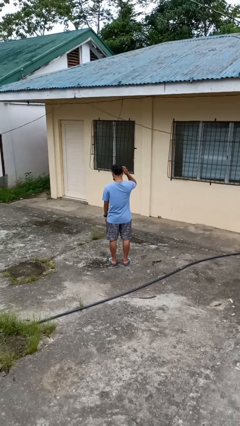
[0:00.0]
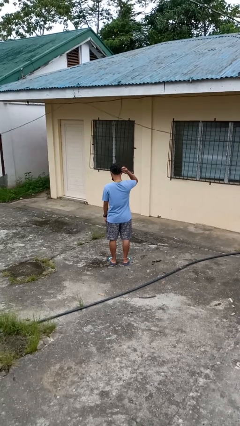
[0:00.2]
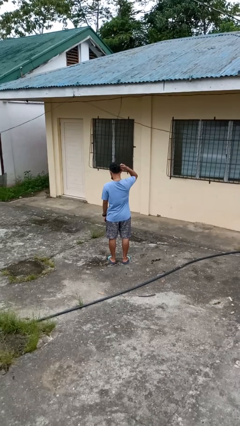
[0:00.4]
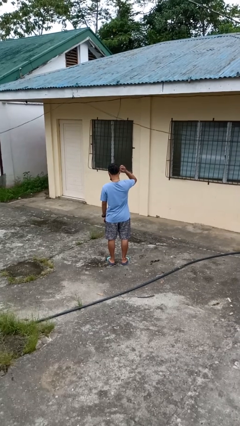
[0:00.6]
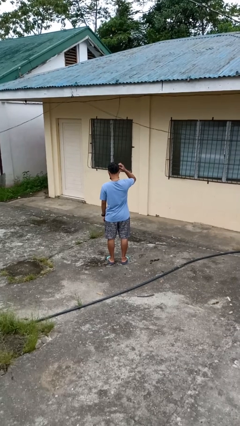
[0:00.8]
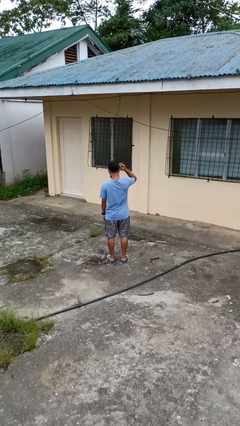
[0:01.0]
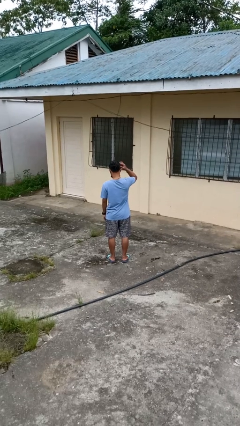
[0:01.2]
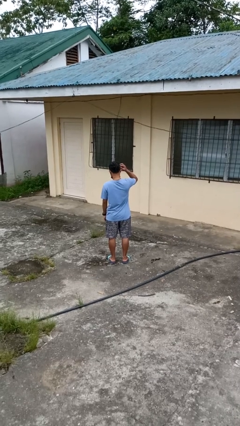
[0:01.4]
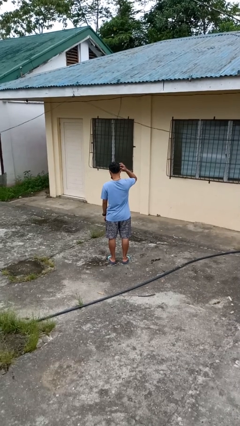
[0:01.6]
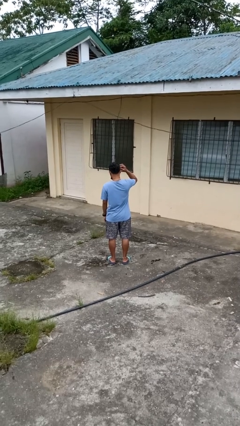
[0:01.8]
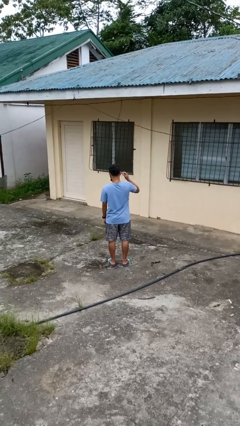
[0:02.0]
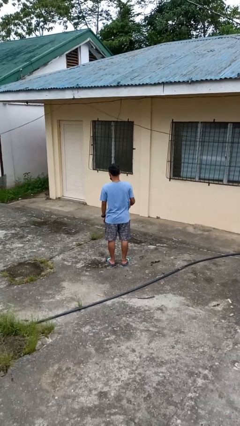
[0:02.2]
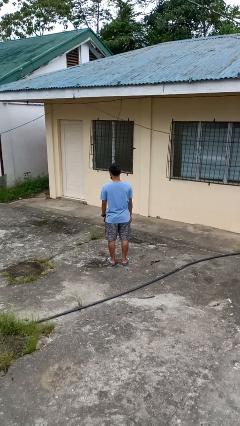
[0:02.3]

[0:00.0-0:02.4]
person scratches face

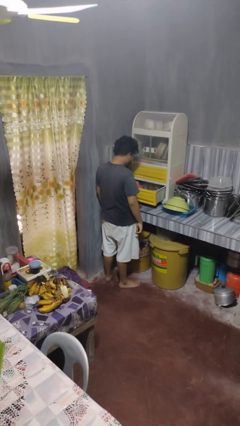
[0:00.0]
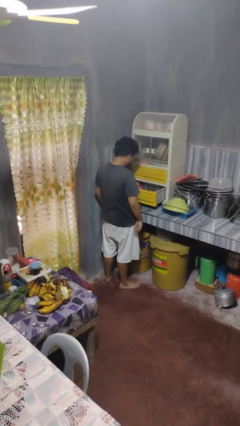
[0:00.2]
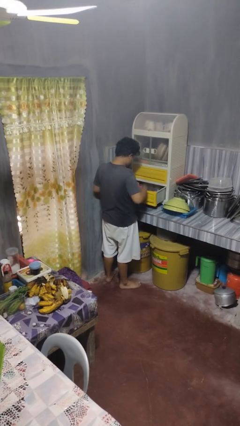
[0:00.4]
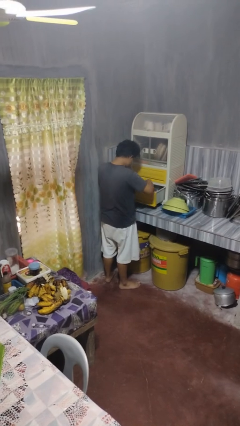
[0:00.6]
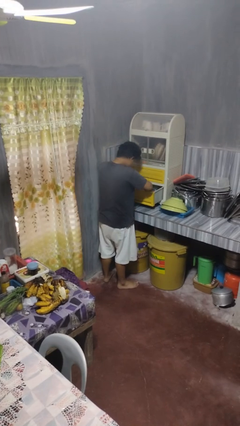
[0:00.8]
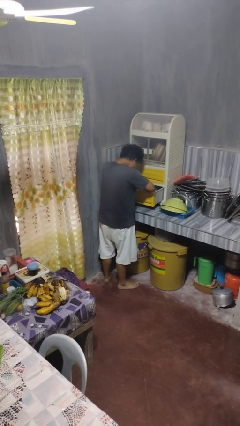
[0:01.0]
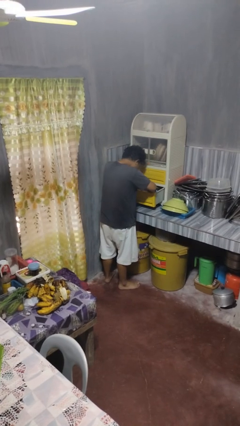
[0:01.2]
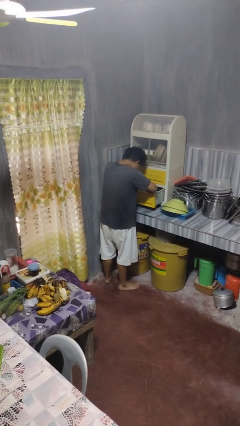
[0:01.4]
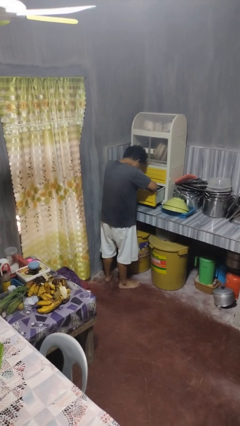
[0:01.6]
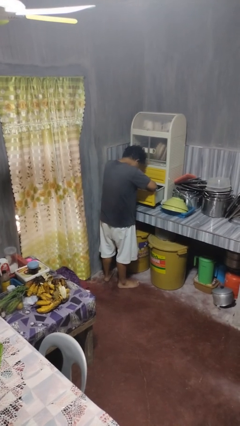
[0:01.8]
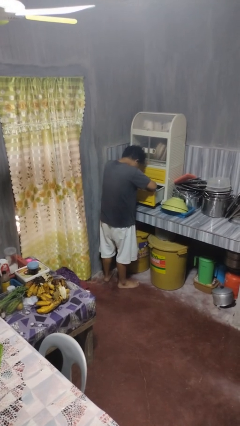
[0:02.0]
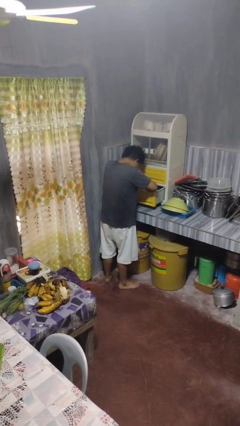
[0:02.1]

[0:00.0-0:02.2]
person searches in kitchen drawer

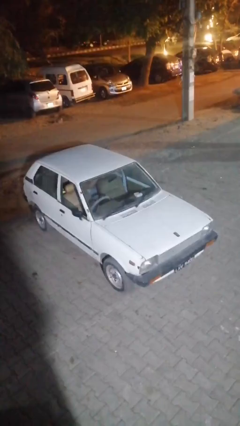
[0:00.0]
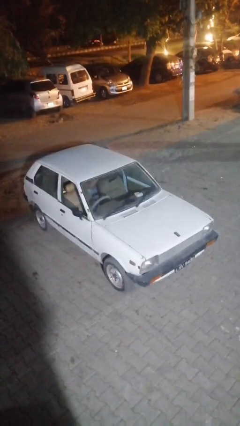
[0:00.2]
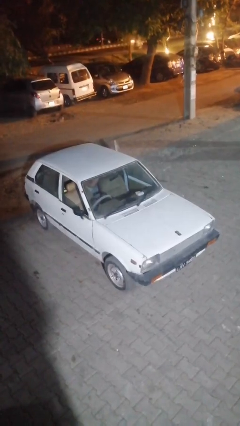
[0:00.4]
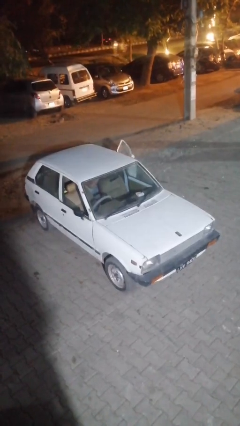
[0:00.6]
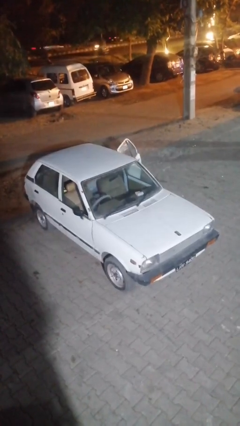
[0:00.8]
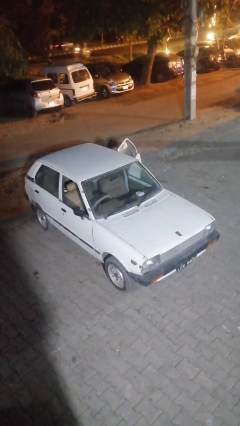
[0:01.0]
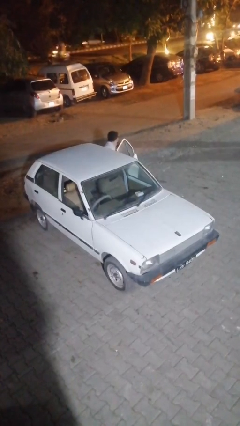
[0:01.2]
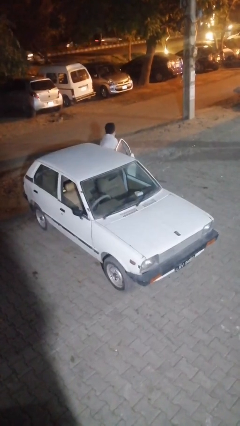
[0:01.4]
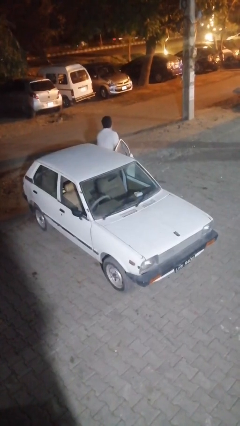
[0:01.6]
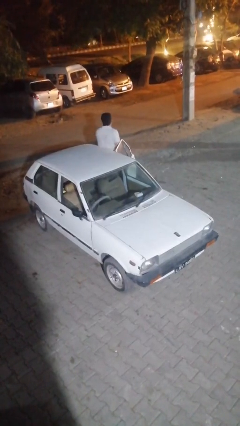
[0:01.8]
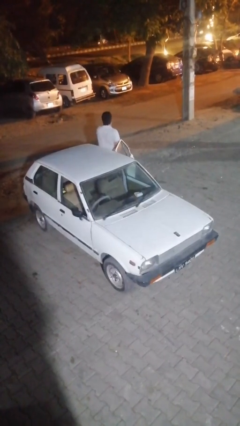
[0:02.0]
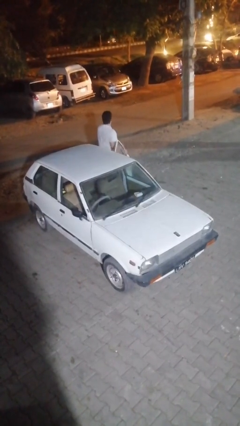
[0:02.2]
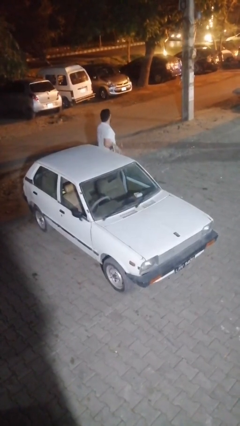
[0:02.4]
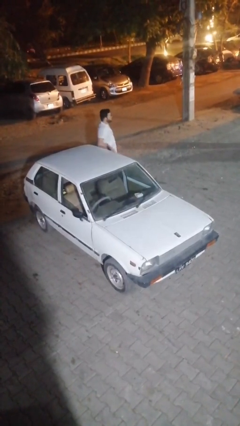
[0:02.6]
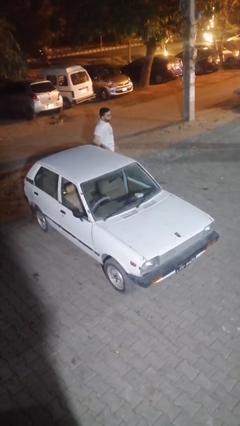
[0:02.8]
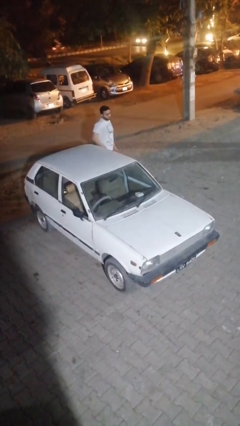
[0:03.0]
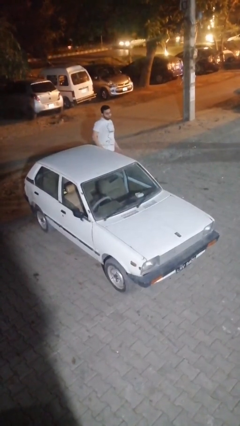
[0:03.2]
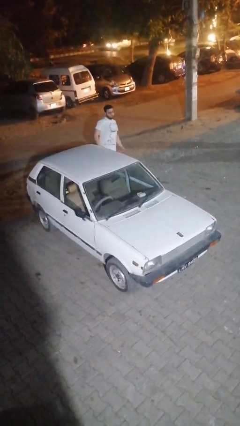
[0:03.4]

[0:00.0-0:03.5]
car drops off person

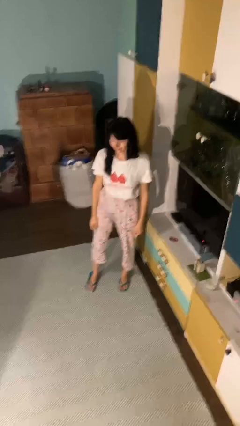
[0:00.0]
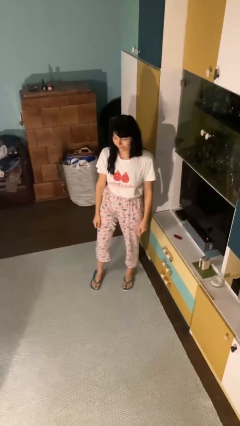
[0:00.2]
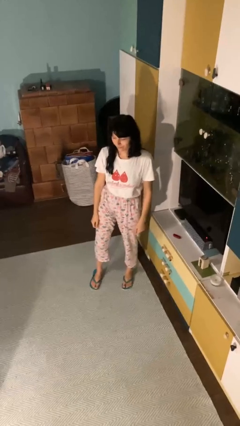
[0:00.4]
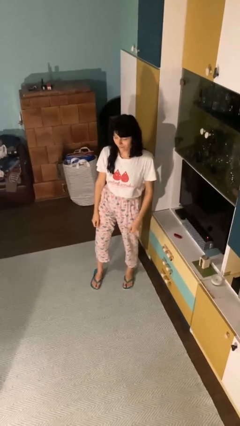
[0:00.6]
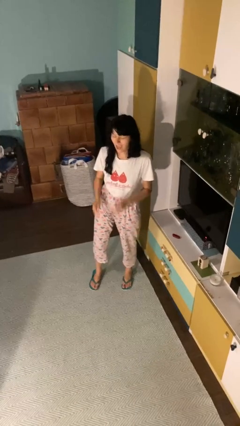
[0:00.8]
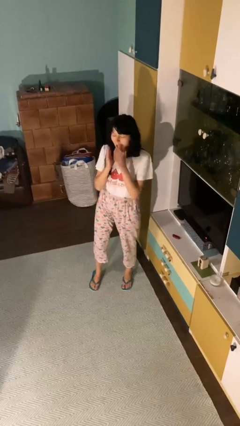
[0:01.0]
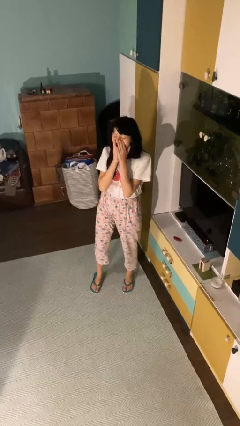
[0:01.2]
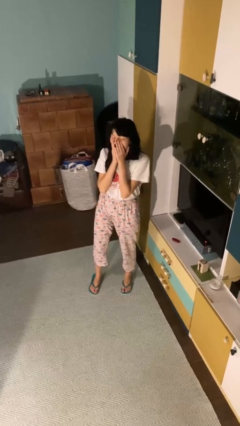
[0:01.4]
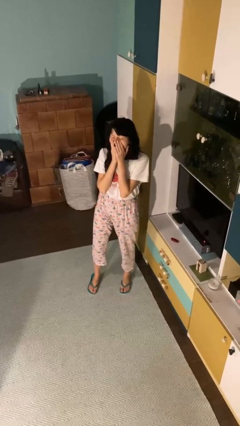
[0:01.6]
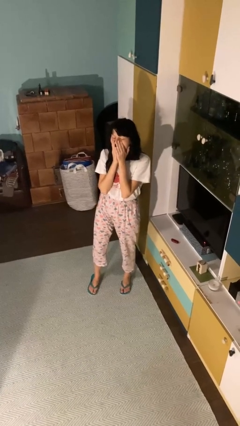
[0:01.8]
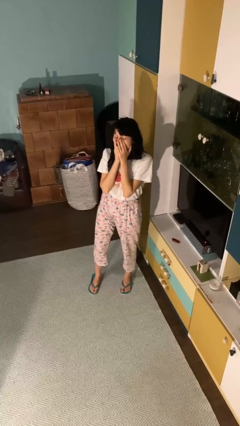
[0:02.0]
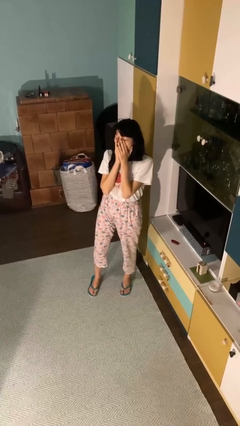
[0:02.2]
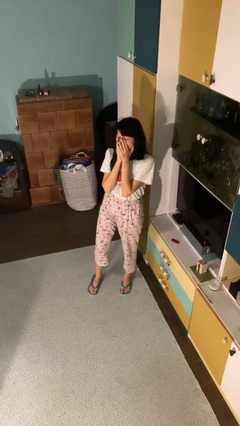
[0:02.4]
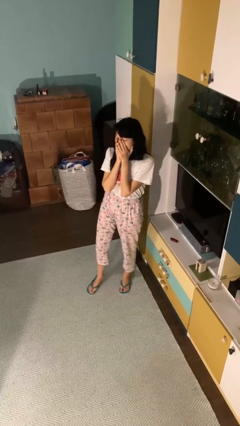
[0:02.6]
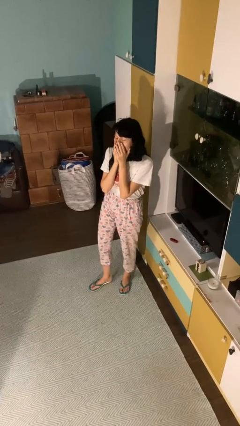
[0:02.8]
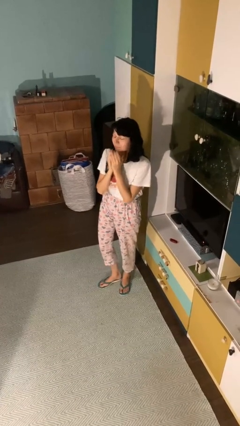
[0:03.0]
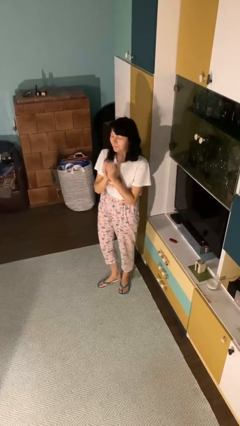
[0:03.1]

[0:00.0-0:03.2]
person yawns

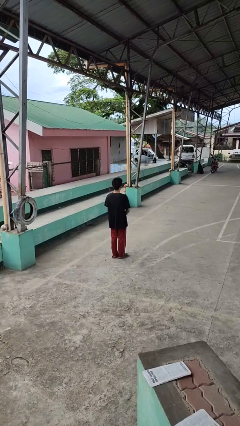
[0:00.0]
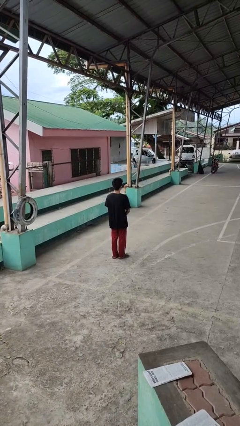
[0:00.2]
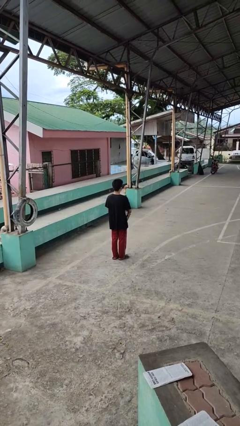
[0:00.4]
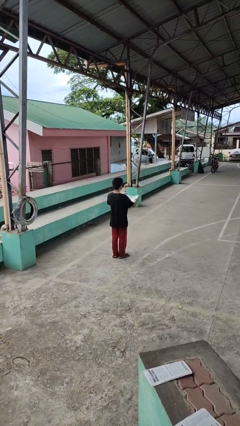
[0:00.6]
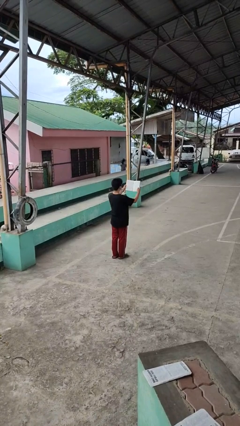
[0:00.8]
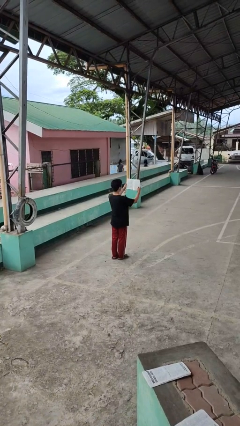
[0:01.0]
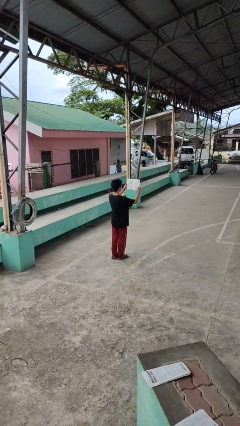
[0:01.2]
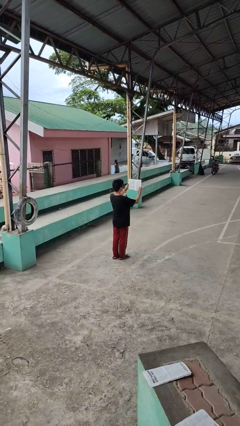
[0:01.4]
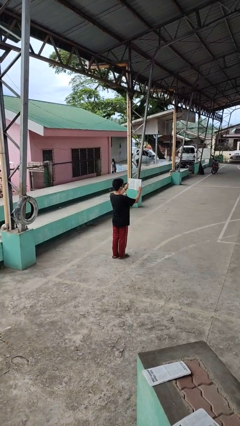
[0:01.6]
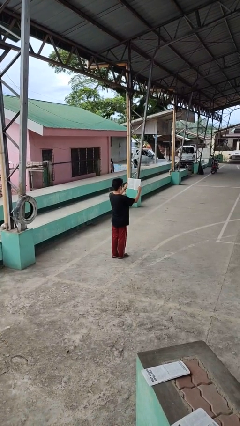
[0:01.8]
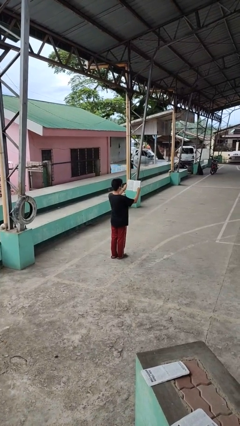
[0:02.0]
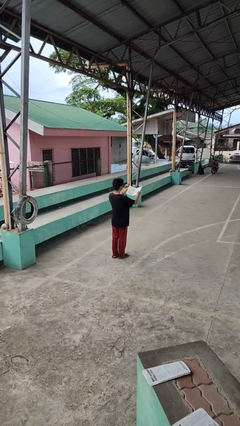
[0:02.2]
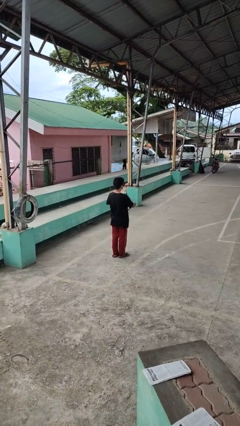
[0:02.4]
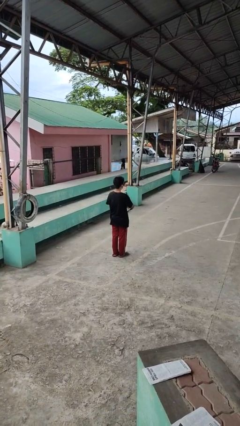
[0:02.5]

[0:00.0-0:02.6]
person reads book

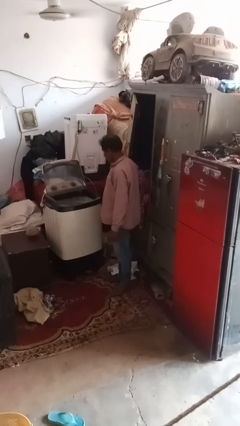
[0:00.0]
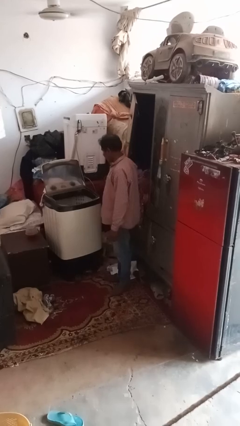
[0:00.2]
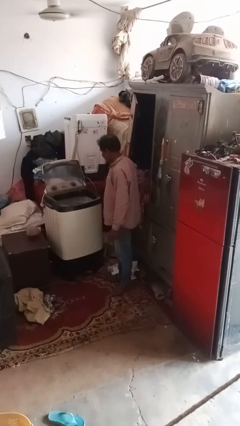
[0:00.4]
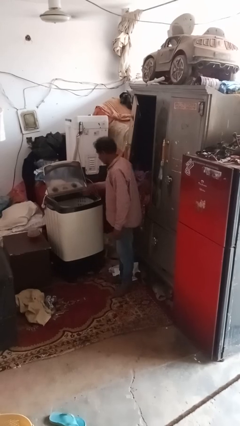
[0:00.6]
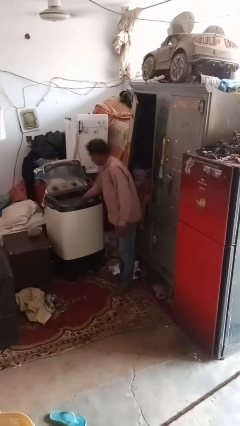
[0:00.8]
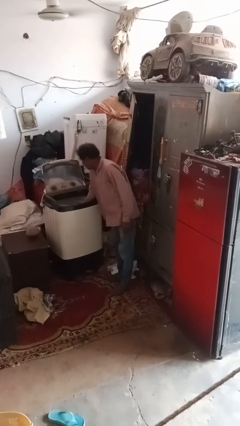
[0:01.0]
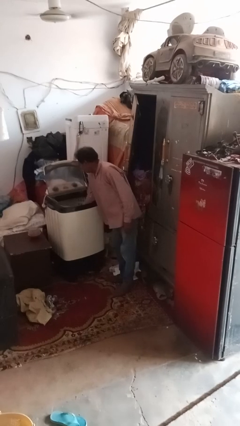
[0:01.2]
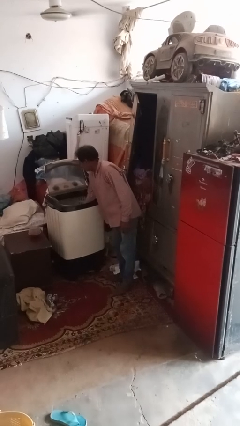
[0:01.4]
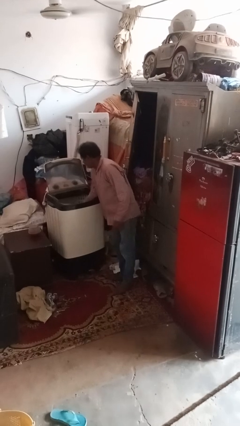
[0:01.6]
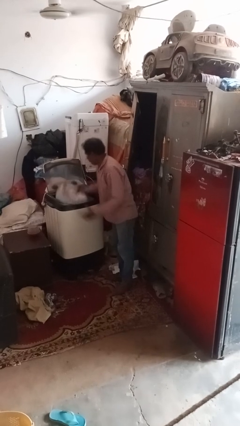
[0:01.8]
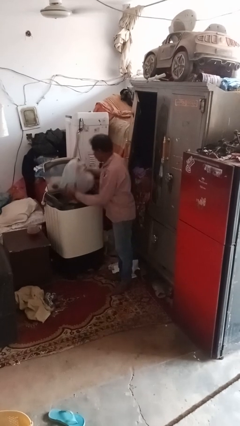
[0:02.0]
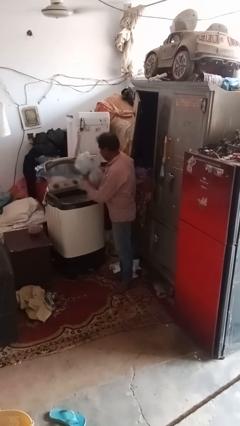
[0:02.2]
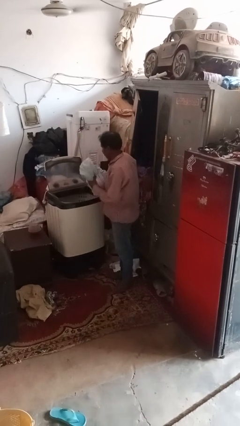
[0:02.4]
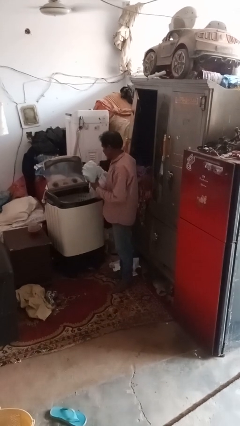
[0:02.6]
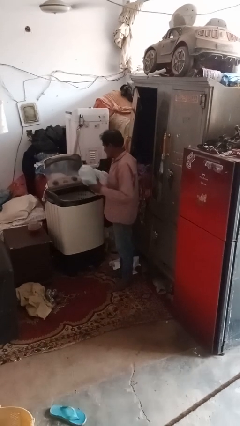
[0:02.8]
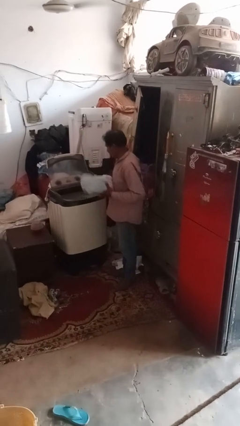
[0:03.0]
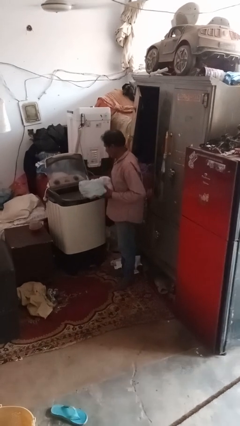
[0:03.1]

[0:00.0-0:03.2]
person unloads clotheswasher
